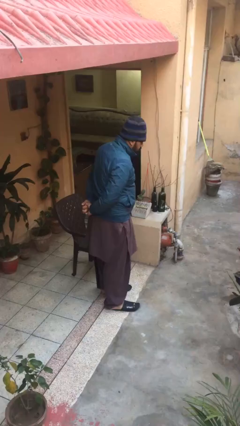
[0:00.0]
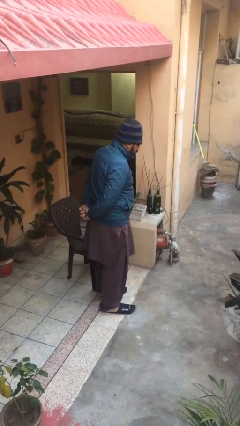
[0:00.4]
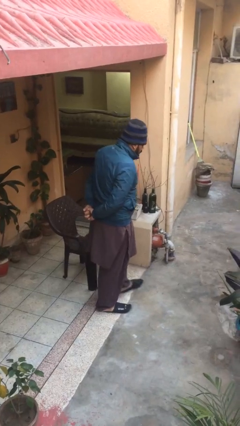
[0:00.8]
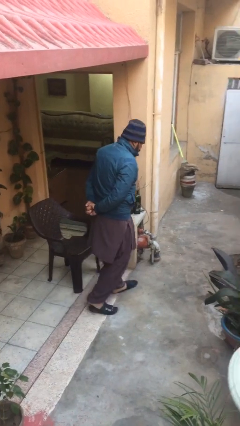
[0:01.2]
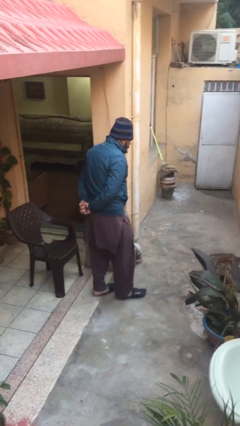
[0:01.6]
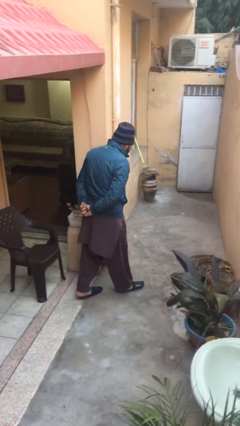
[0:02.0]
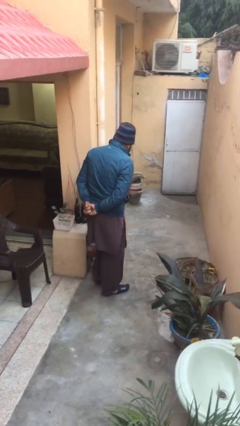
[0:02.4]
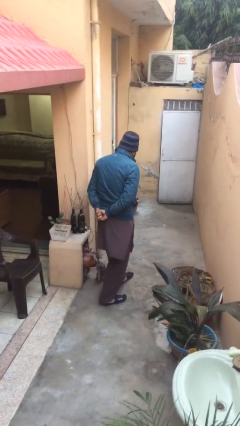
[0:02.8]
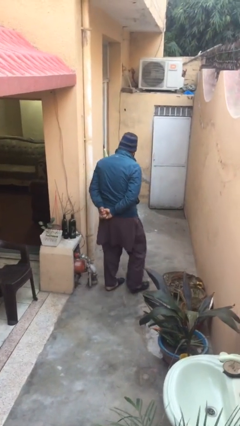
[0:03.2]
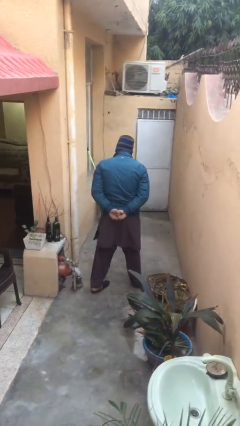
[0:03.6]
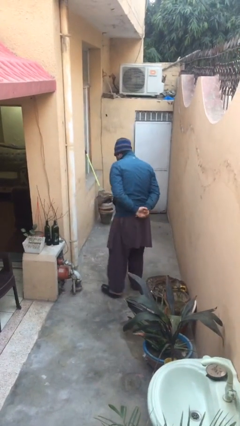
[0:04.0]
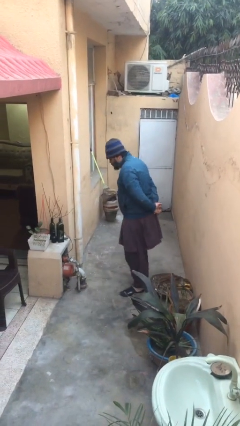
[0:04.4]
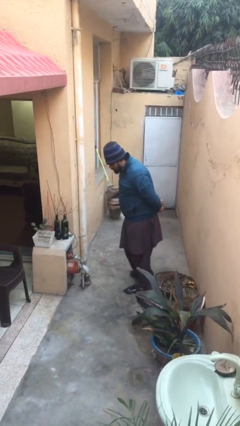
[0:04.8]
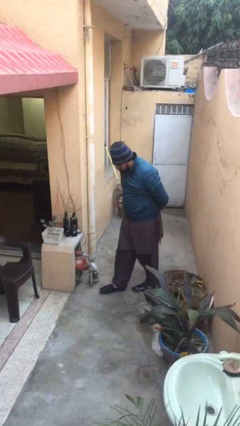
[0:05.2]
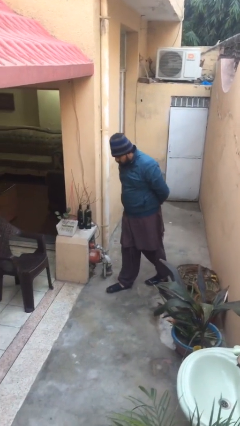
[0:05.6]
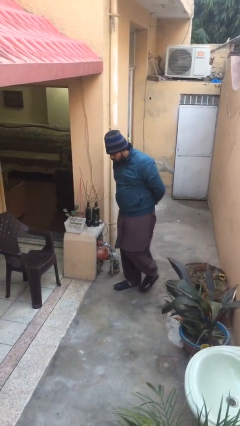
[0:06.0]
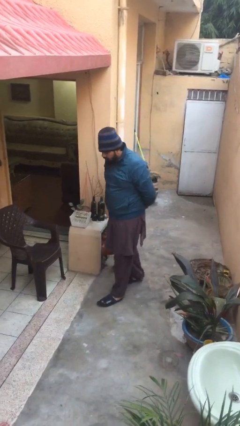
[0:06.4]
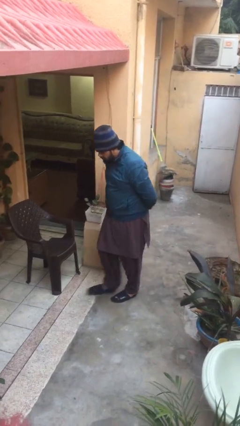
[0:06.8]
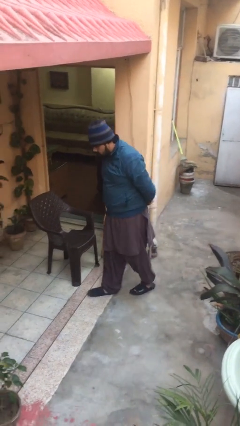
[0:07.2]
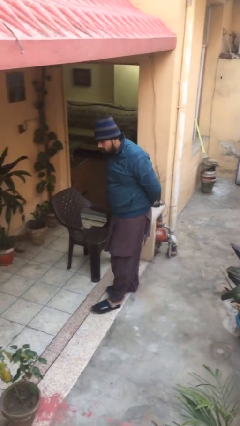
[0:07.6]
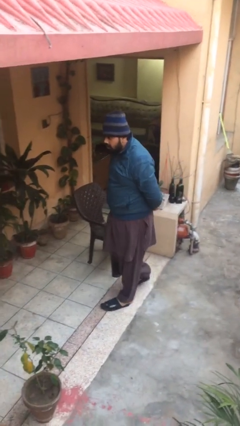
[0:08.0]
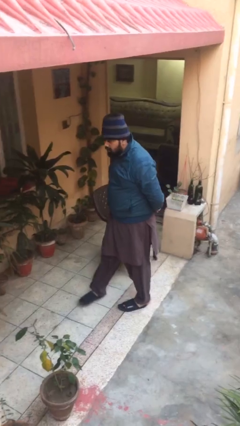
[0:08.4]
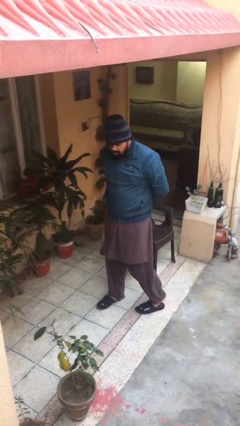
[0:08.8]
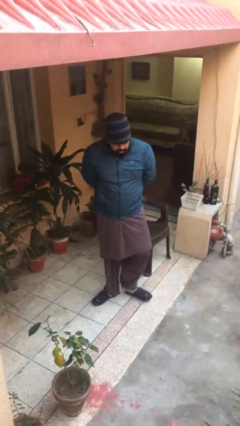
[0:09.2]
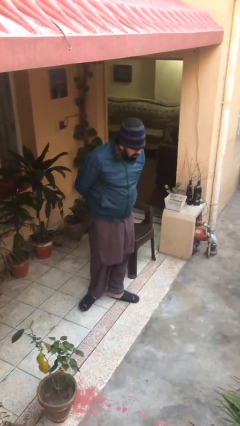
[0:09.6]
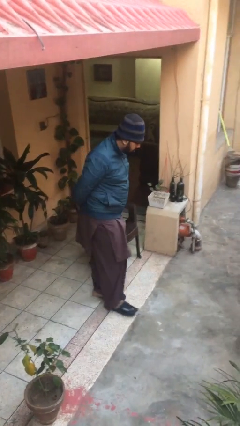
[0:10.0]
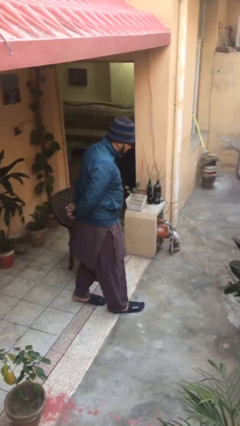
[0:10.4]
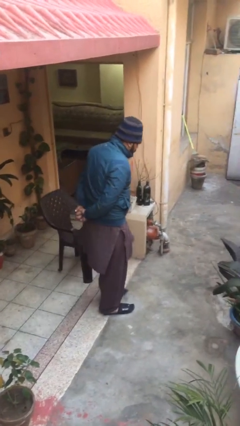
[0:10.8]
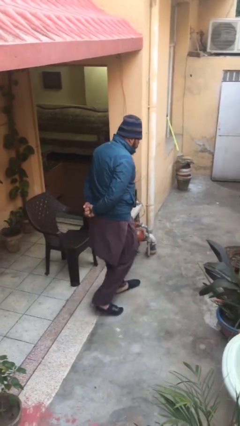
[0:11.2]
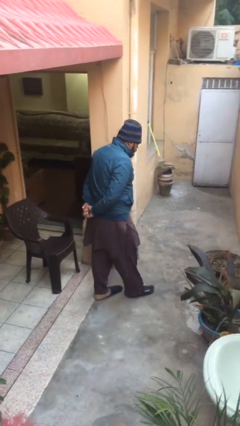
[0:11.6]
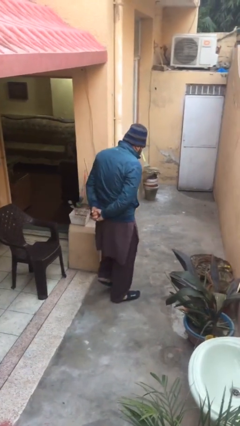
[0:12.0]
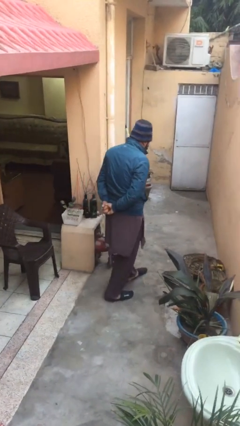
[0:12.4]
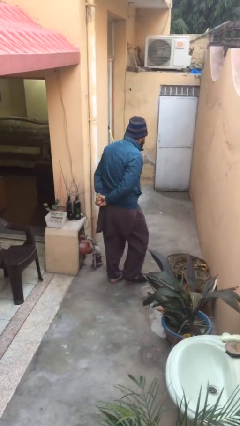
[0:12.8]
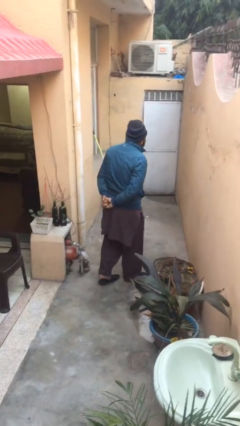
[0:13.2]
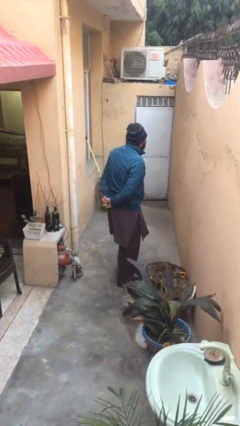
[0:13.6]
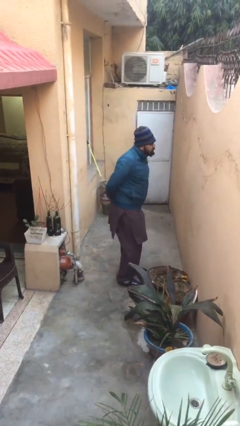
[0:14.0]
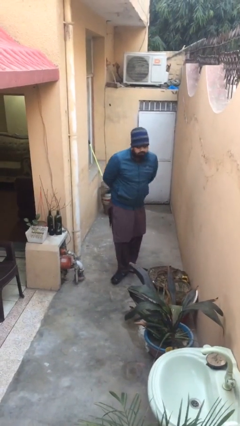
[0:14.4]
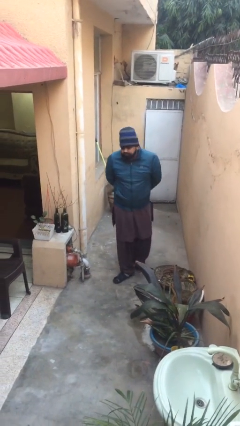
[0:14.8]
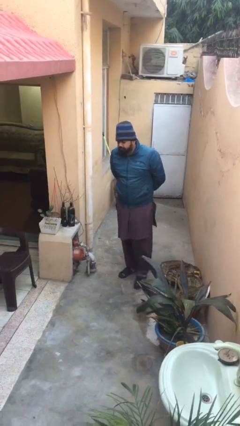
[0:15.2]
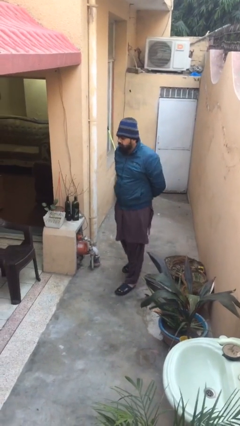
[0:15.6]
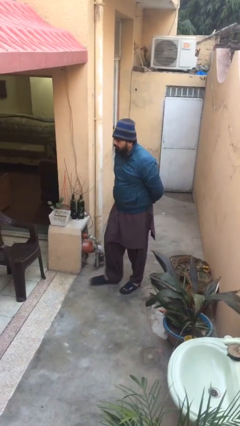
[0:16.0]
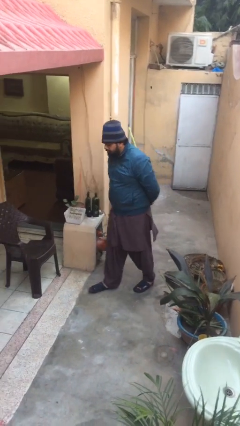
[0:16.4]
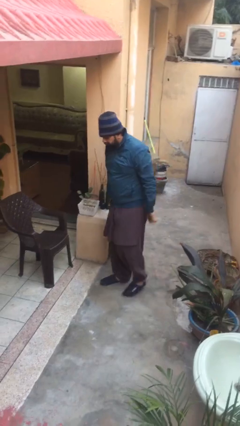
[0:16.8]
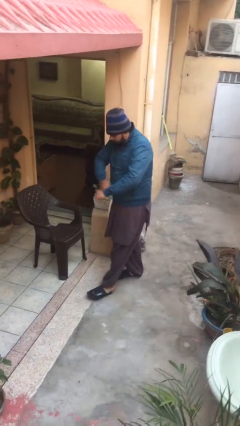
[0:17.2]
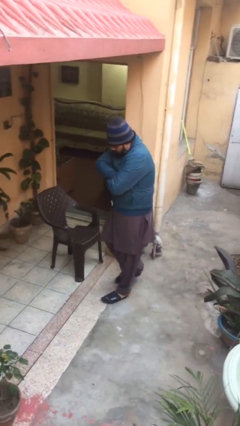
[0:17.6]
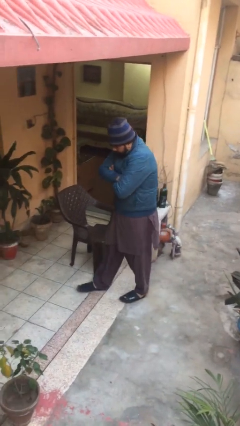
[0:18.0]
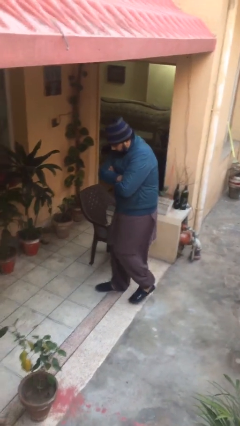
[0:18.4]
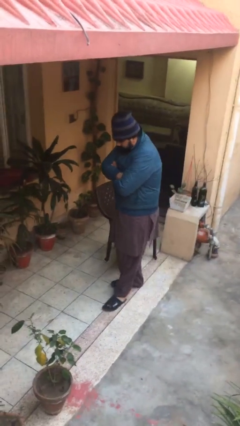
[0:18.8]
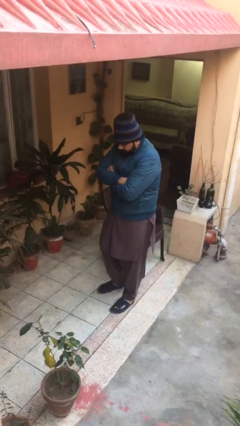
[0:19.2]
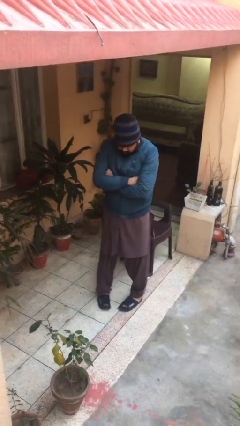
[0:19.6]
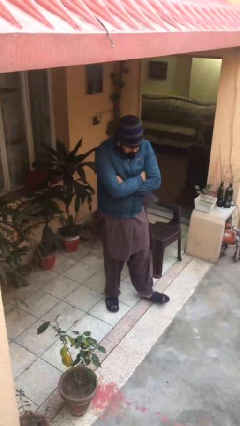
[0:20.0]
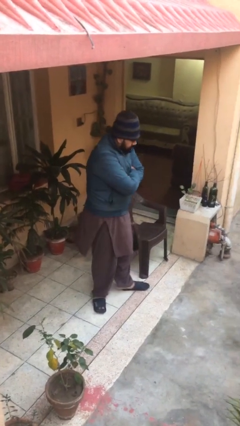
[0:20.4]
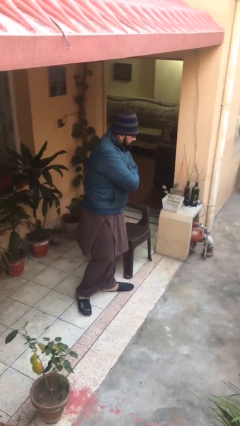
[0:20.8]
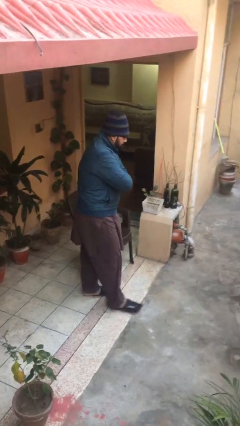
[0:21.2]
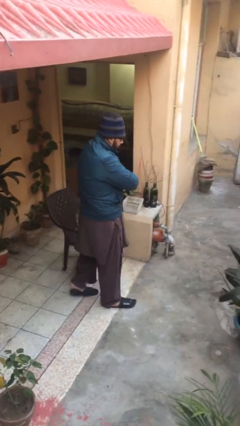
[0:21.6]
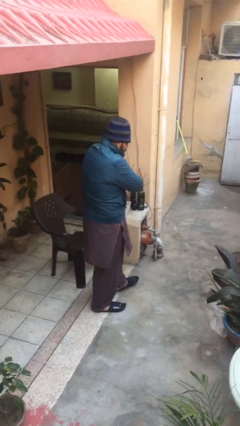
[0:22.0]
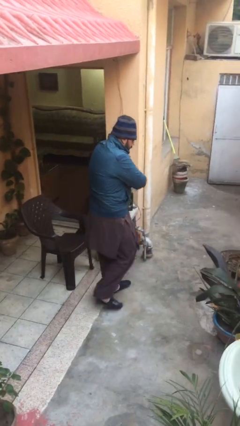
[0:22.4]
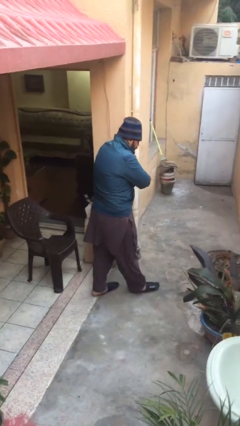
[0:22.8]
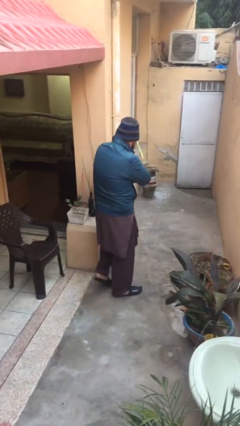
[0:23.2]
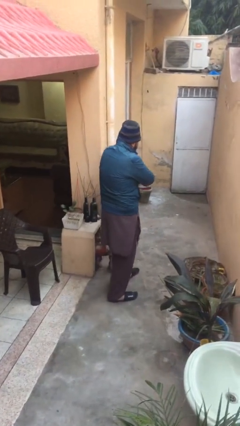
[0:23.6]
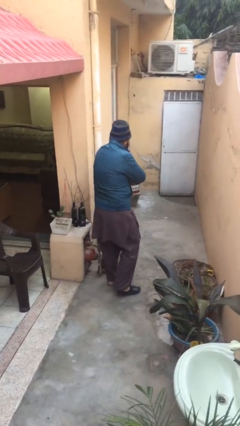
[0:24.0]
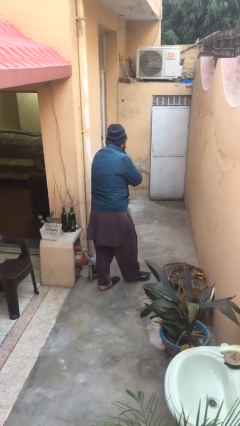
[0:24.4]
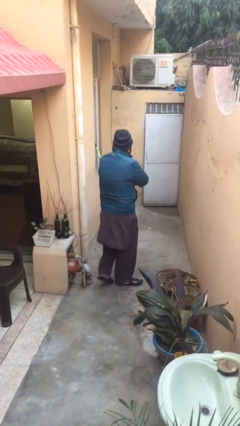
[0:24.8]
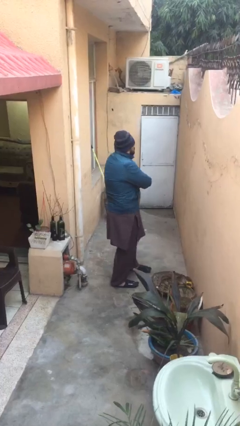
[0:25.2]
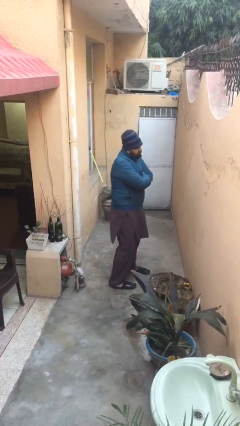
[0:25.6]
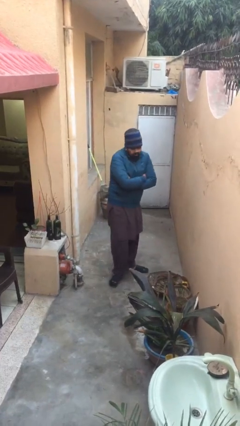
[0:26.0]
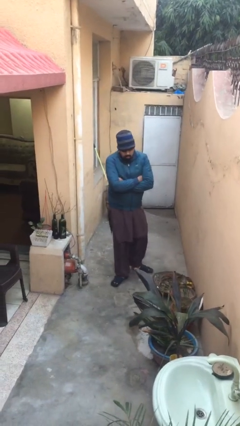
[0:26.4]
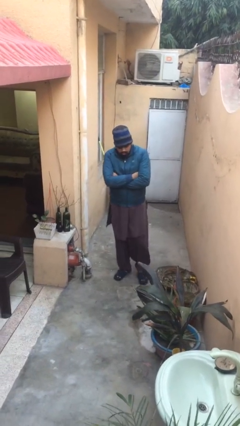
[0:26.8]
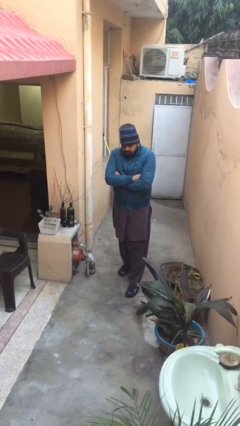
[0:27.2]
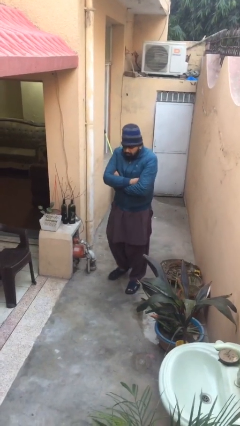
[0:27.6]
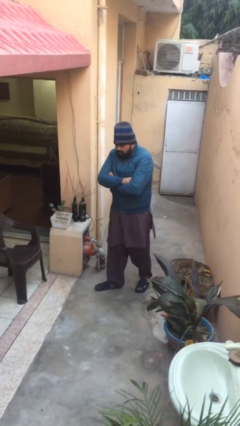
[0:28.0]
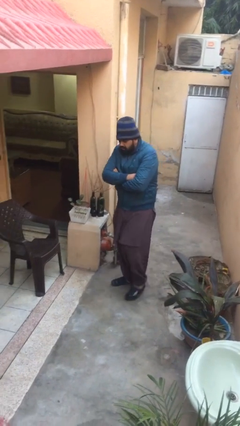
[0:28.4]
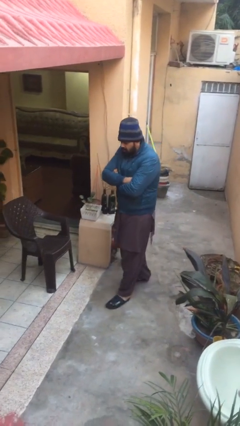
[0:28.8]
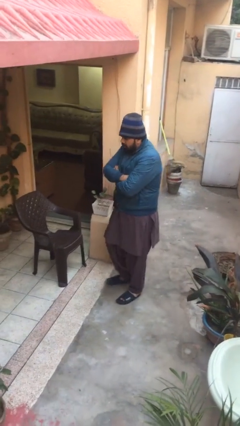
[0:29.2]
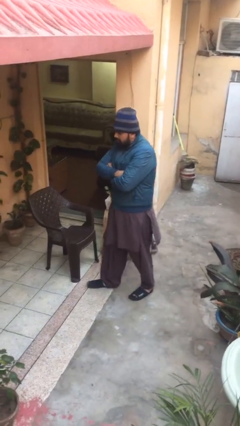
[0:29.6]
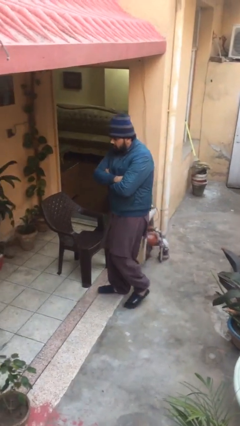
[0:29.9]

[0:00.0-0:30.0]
person walks

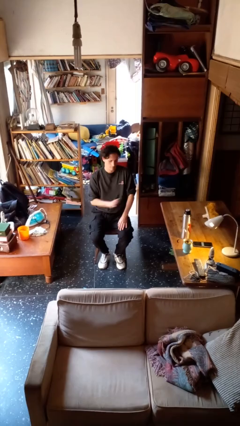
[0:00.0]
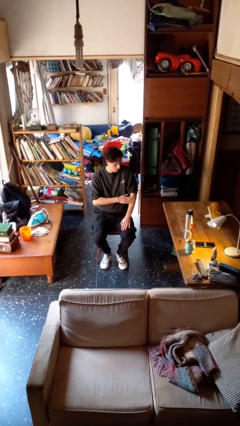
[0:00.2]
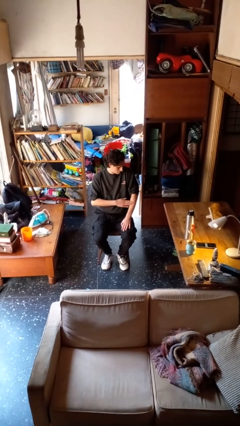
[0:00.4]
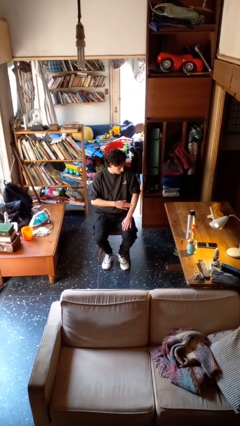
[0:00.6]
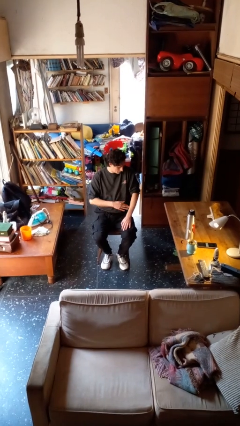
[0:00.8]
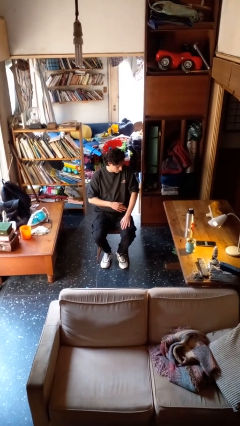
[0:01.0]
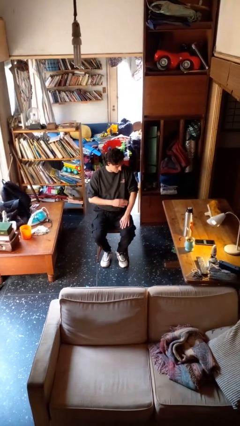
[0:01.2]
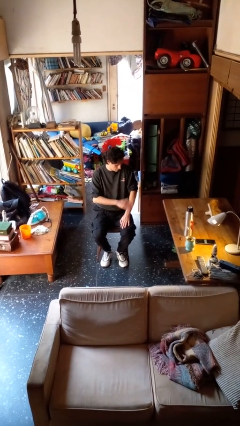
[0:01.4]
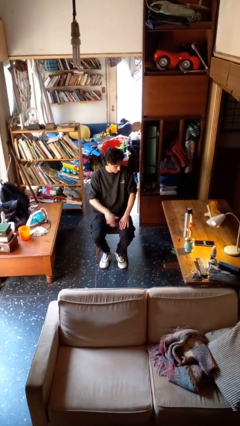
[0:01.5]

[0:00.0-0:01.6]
person swats bug

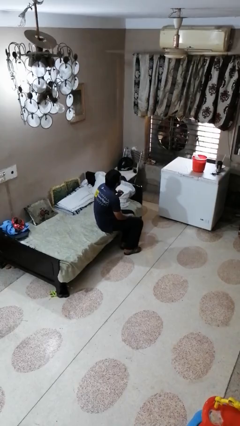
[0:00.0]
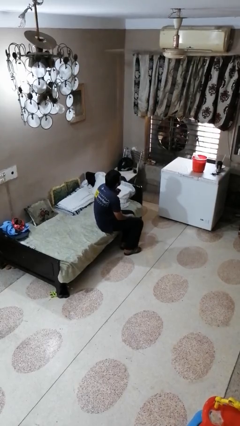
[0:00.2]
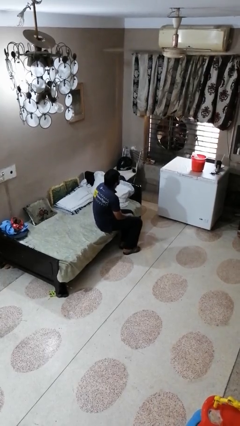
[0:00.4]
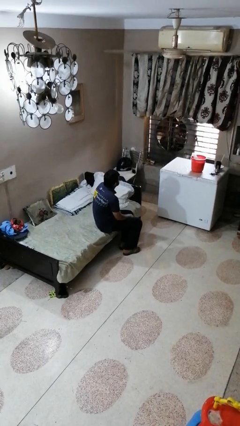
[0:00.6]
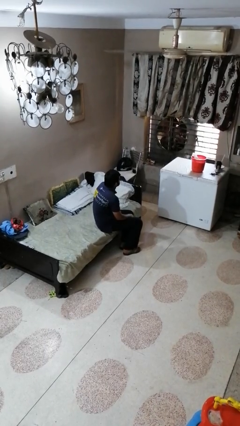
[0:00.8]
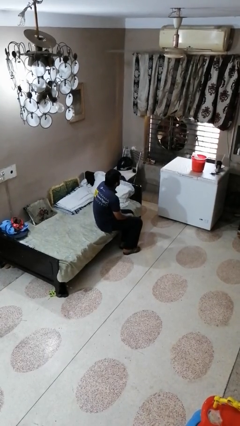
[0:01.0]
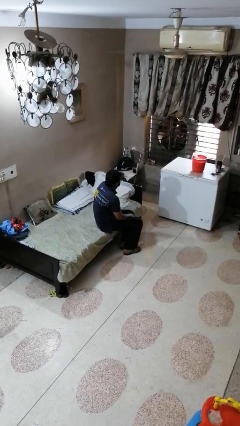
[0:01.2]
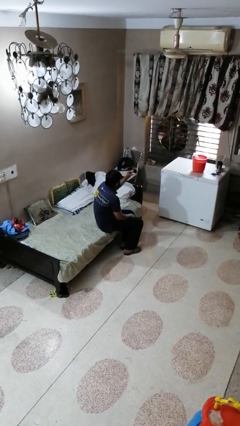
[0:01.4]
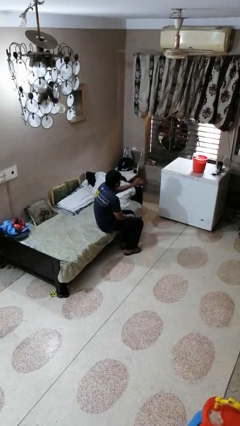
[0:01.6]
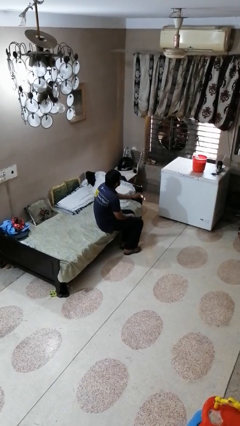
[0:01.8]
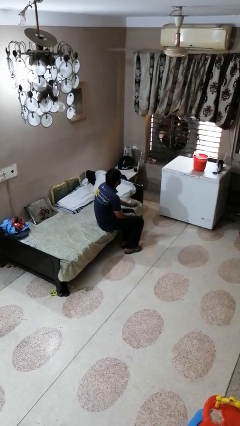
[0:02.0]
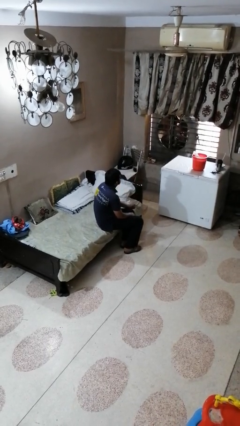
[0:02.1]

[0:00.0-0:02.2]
person takes off glasses
